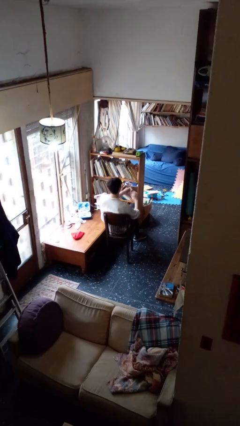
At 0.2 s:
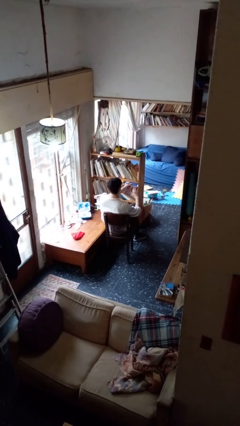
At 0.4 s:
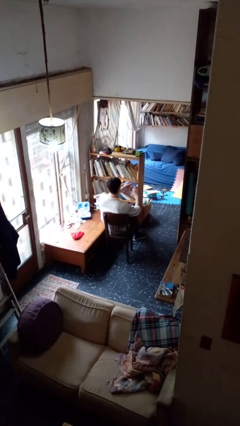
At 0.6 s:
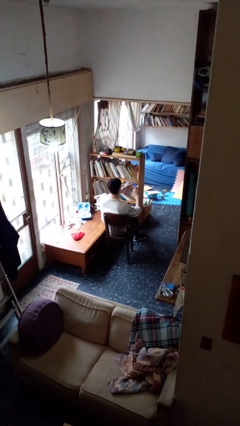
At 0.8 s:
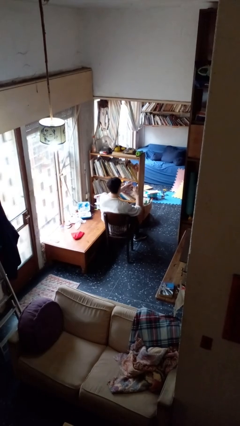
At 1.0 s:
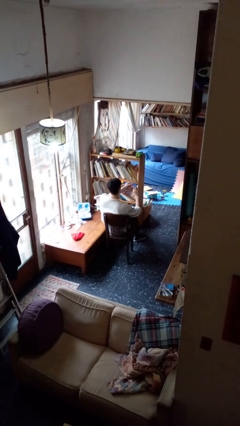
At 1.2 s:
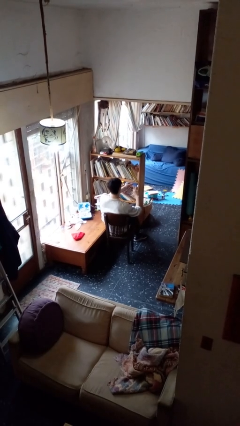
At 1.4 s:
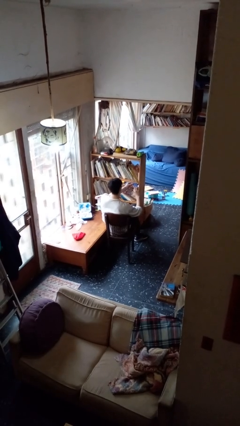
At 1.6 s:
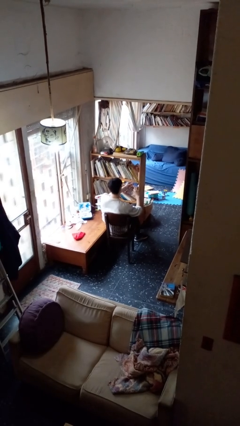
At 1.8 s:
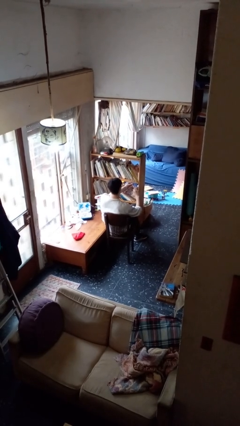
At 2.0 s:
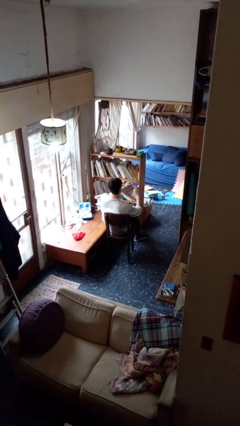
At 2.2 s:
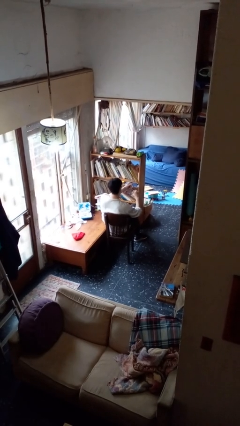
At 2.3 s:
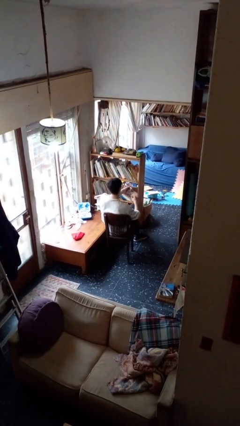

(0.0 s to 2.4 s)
person clips fingernails

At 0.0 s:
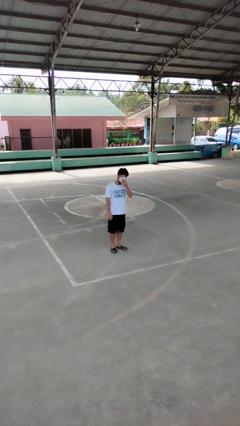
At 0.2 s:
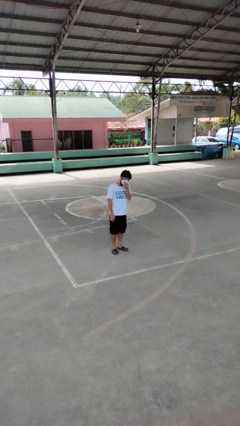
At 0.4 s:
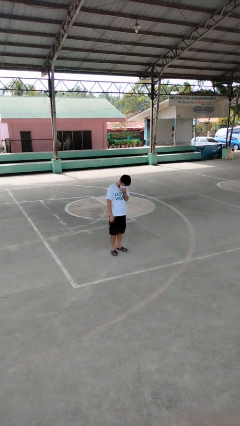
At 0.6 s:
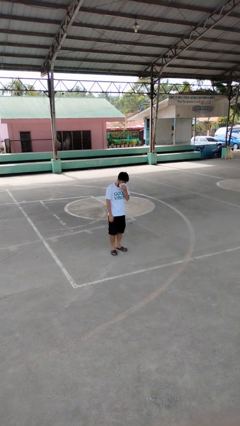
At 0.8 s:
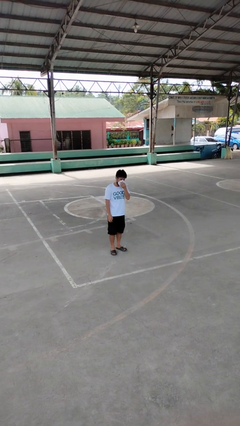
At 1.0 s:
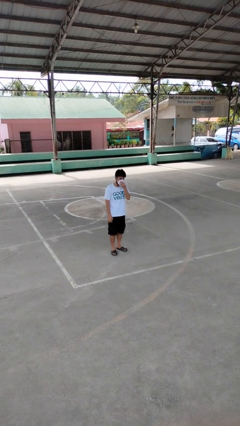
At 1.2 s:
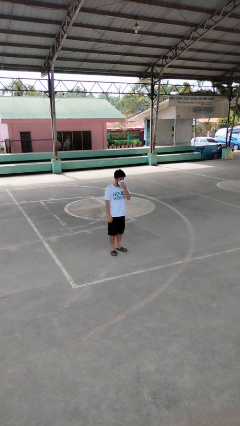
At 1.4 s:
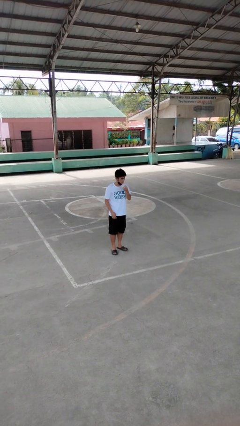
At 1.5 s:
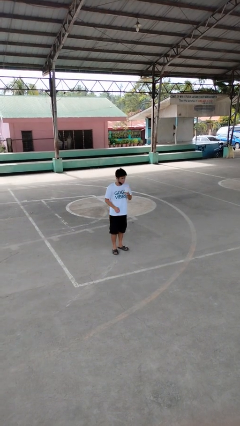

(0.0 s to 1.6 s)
person blows nose

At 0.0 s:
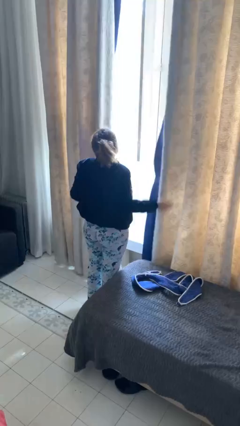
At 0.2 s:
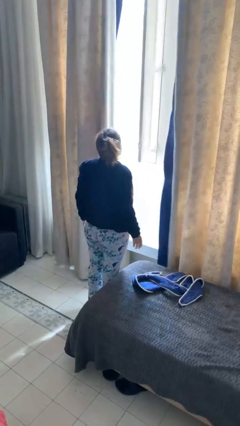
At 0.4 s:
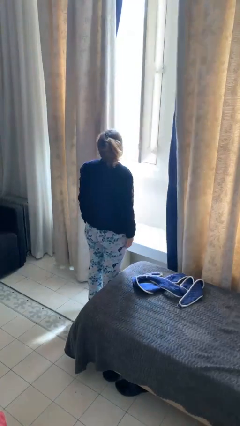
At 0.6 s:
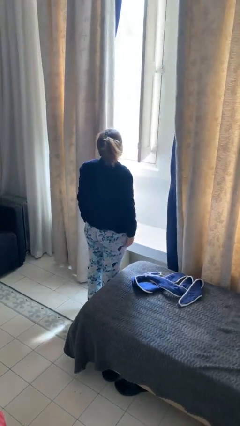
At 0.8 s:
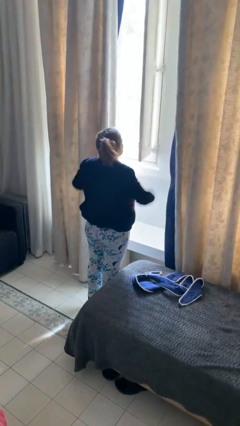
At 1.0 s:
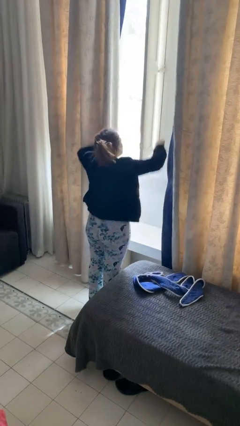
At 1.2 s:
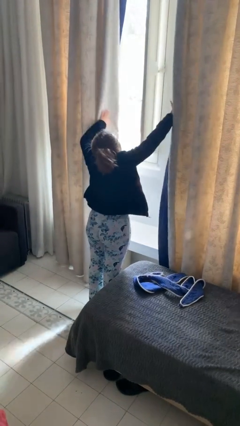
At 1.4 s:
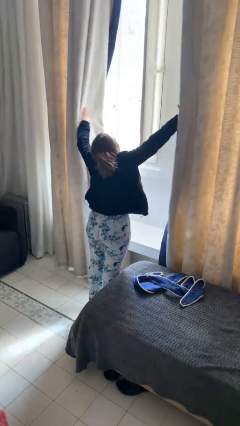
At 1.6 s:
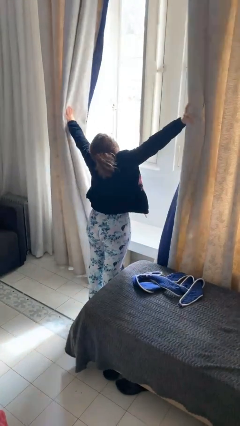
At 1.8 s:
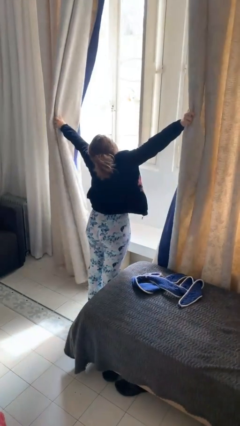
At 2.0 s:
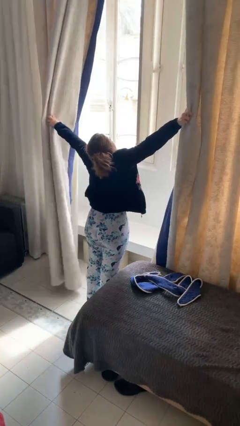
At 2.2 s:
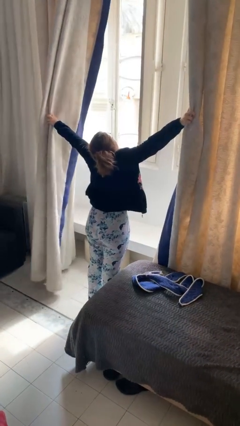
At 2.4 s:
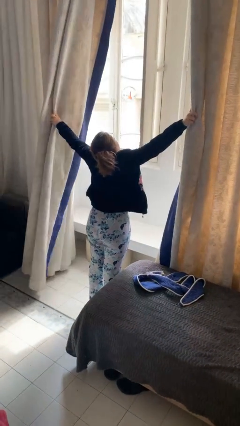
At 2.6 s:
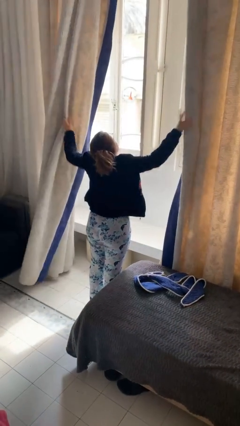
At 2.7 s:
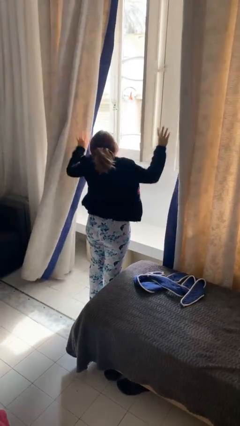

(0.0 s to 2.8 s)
person opens curtains

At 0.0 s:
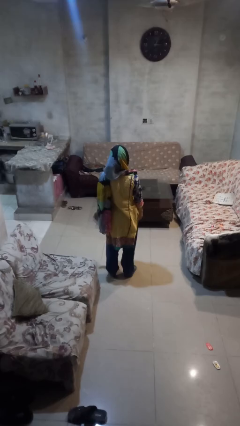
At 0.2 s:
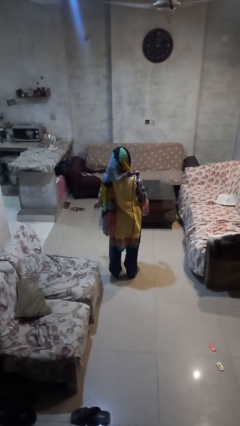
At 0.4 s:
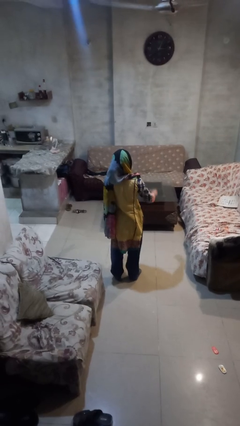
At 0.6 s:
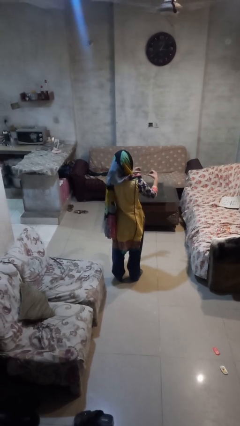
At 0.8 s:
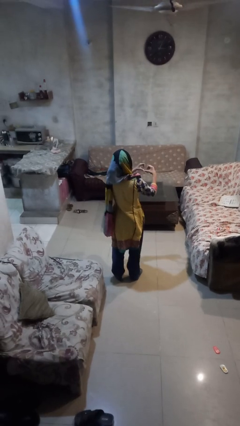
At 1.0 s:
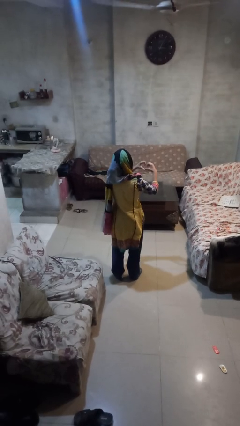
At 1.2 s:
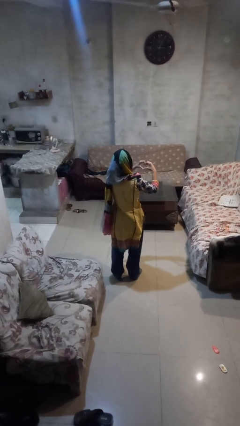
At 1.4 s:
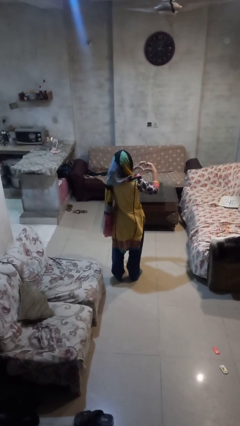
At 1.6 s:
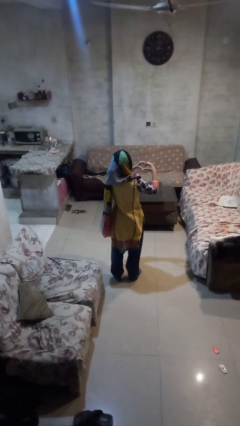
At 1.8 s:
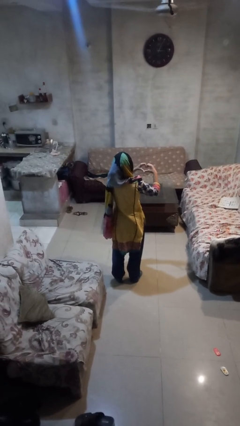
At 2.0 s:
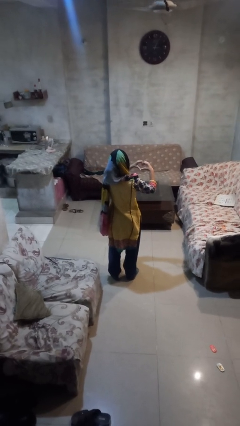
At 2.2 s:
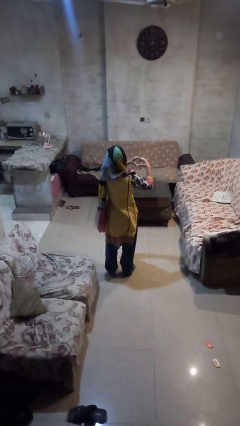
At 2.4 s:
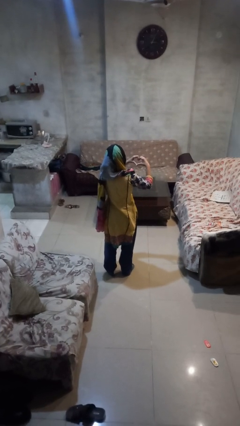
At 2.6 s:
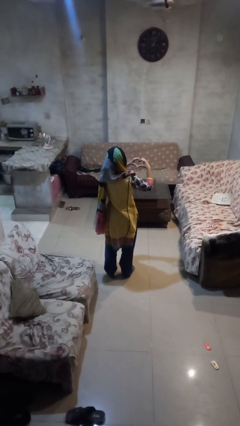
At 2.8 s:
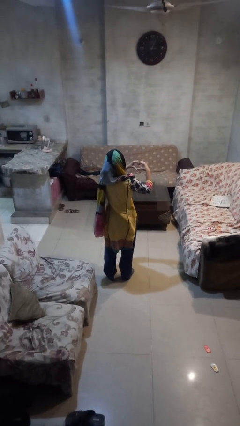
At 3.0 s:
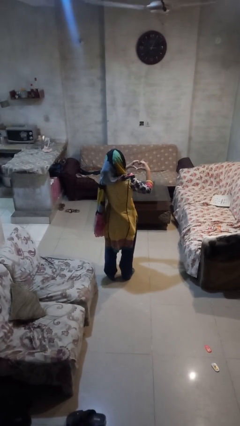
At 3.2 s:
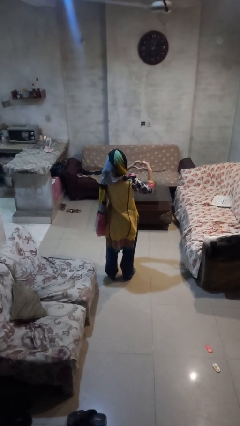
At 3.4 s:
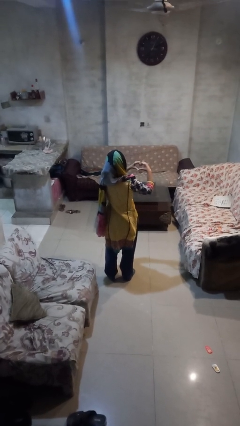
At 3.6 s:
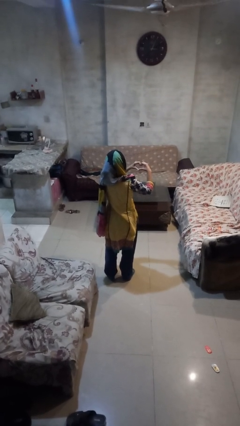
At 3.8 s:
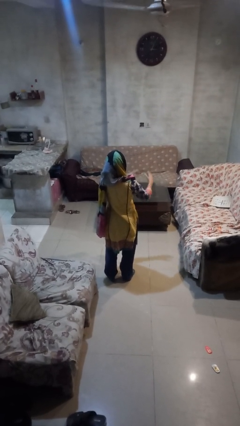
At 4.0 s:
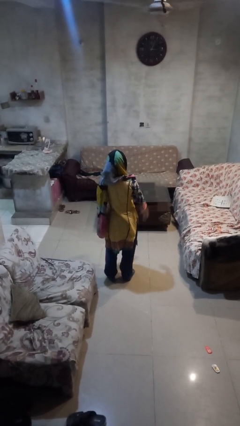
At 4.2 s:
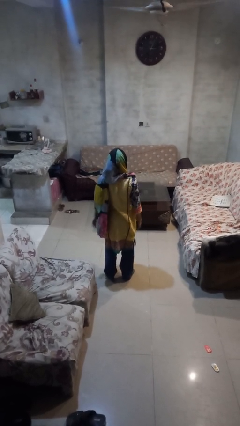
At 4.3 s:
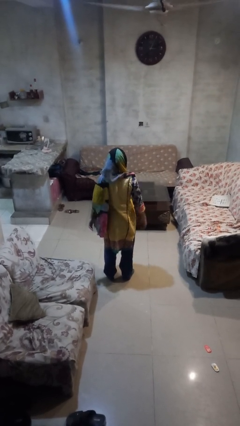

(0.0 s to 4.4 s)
person gestures heart

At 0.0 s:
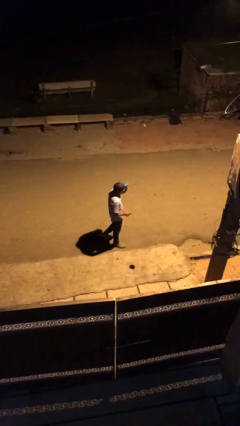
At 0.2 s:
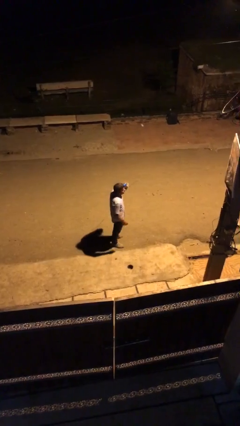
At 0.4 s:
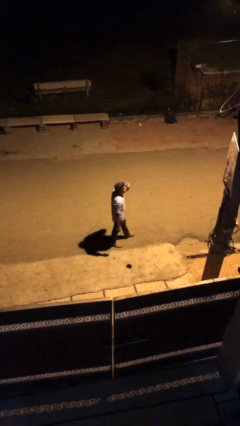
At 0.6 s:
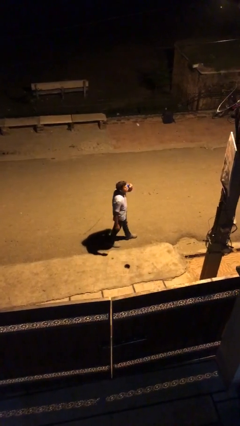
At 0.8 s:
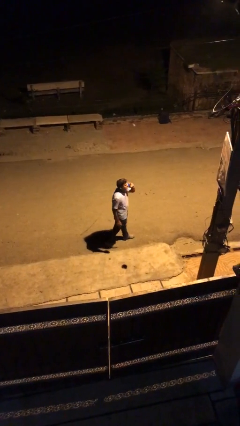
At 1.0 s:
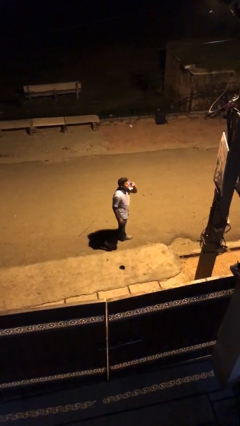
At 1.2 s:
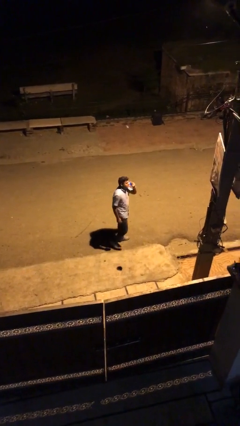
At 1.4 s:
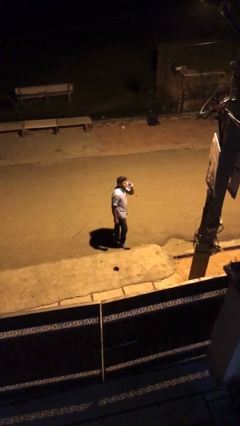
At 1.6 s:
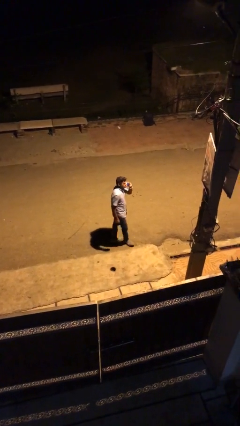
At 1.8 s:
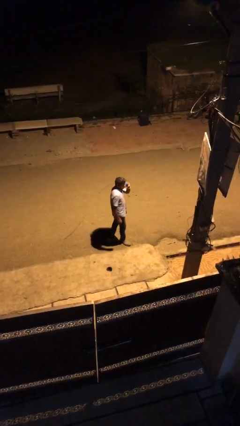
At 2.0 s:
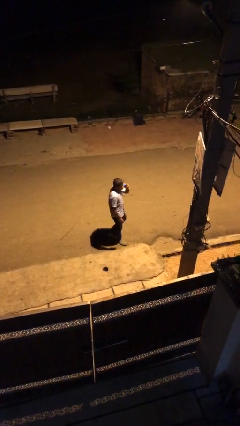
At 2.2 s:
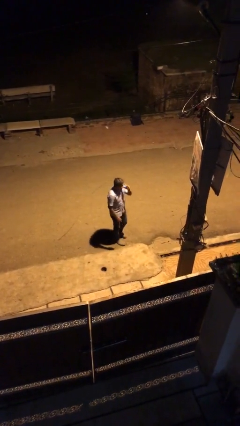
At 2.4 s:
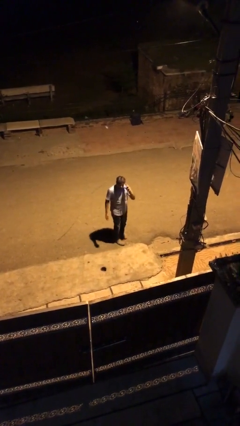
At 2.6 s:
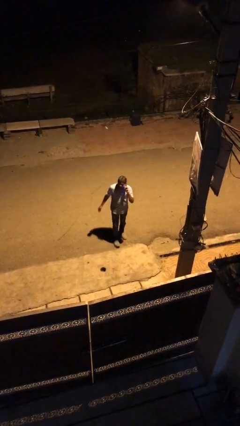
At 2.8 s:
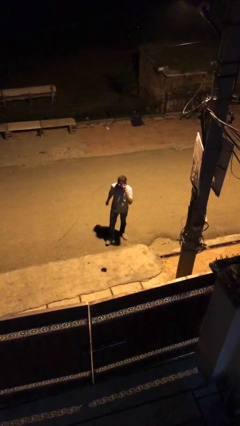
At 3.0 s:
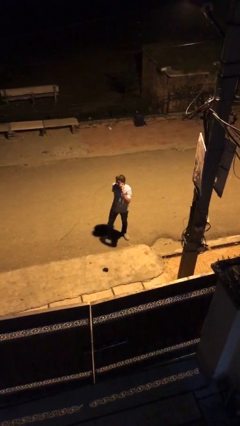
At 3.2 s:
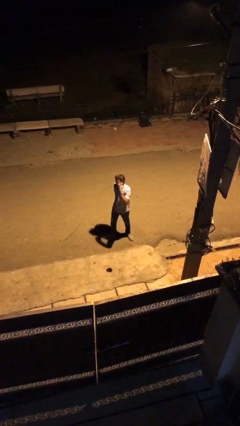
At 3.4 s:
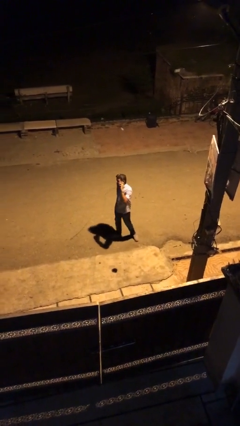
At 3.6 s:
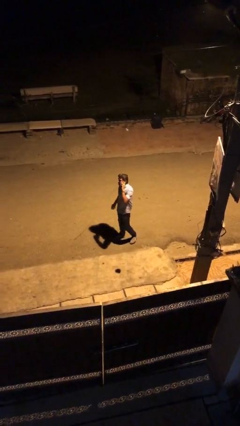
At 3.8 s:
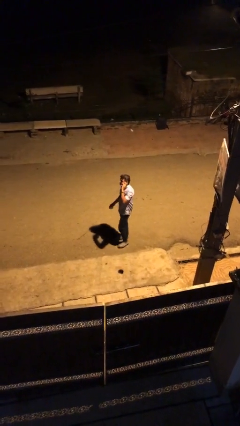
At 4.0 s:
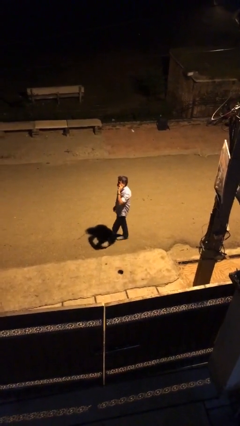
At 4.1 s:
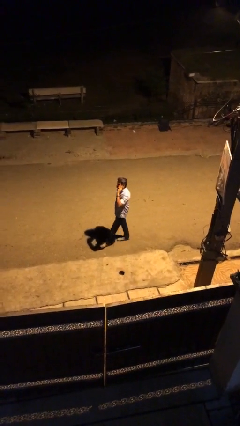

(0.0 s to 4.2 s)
person talks on phone

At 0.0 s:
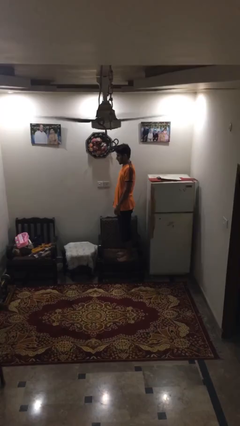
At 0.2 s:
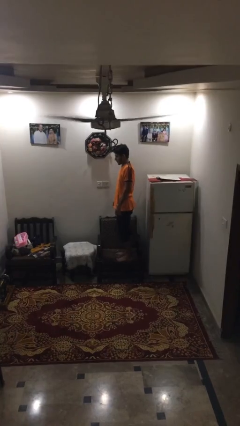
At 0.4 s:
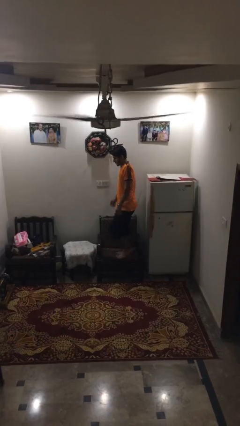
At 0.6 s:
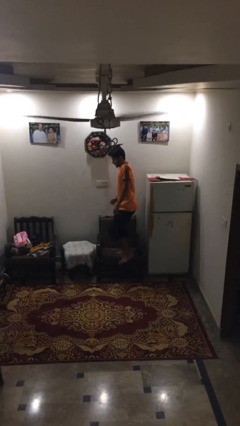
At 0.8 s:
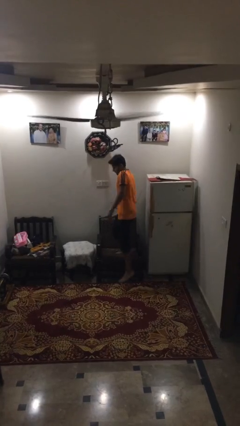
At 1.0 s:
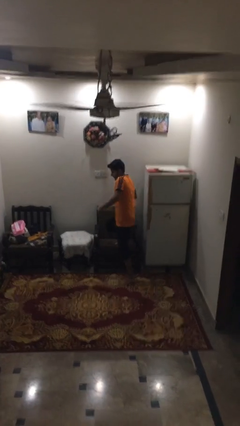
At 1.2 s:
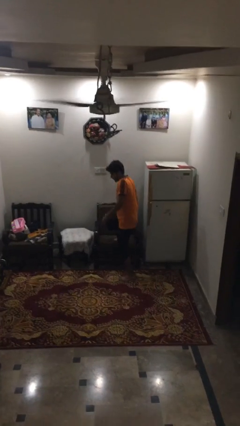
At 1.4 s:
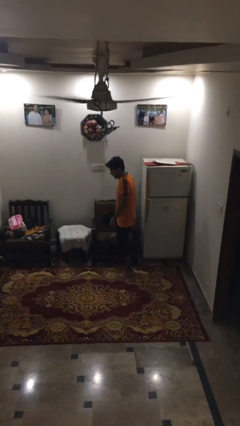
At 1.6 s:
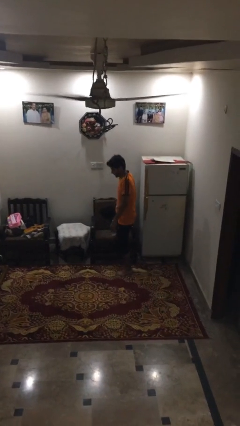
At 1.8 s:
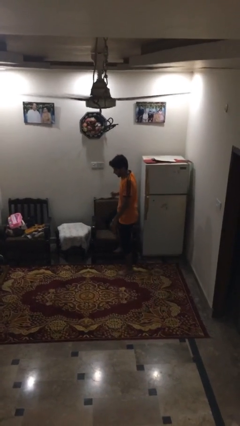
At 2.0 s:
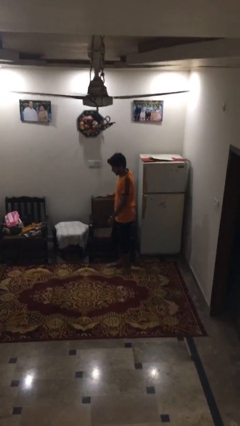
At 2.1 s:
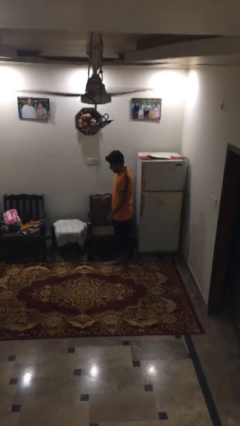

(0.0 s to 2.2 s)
person climbs off couch
